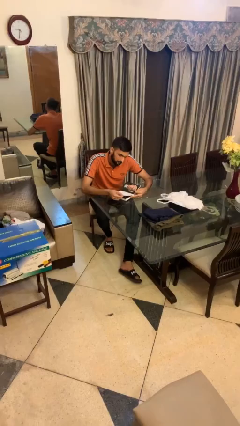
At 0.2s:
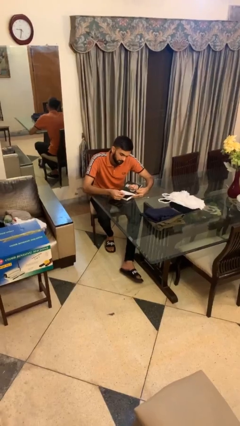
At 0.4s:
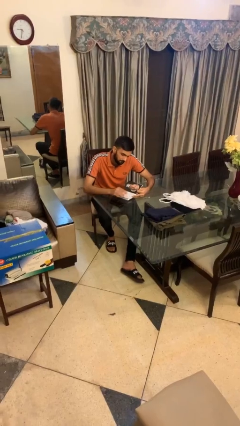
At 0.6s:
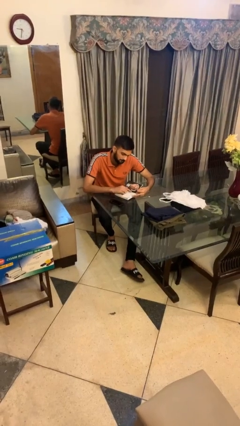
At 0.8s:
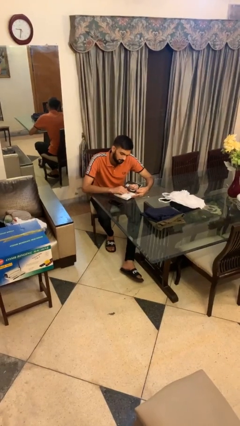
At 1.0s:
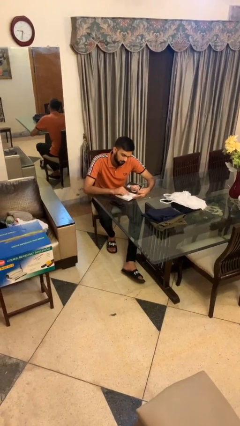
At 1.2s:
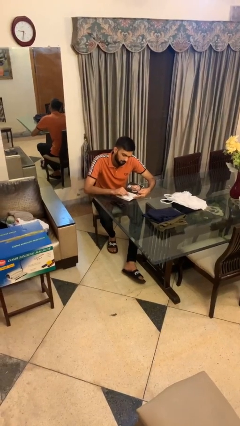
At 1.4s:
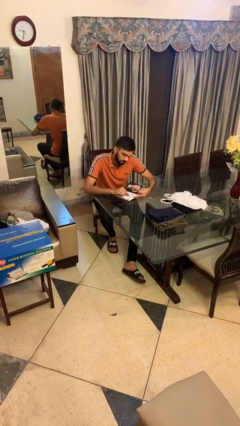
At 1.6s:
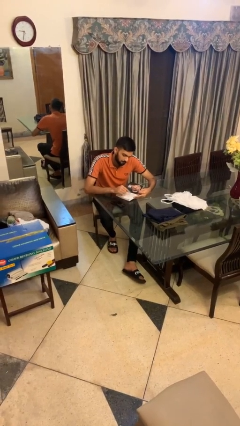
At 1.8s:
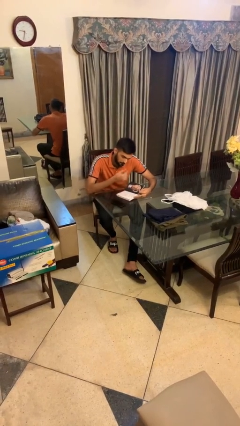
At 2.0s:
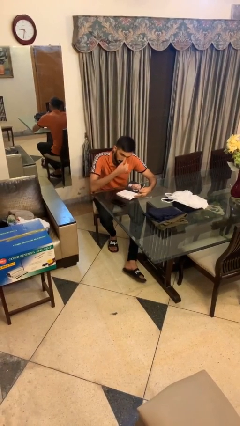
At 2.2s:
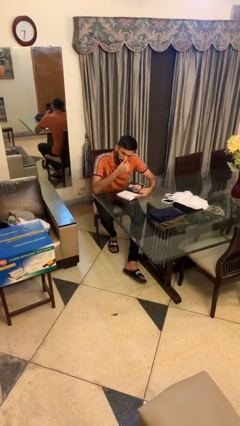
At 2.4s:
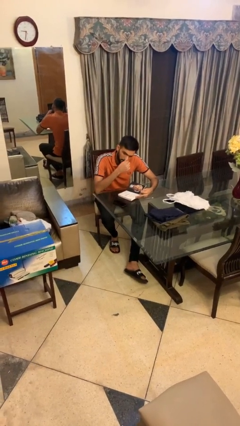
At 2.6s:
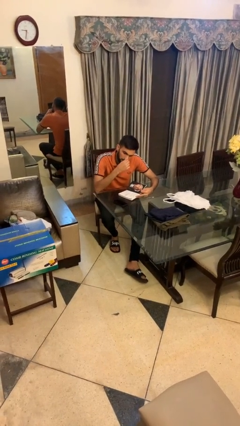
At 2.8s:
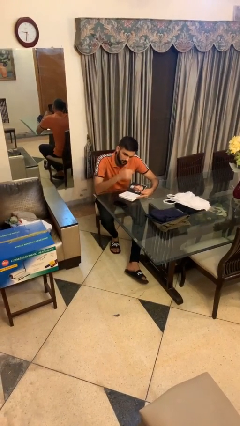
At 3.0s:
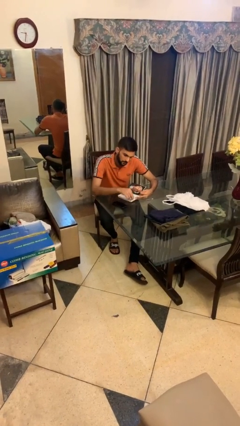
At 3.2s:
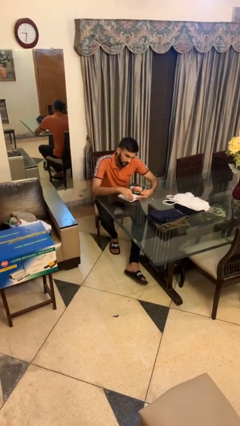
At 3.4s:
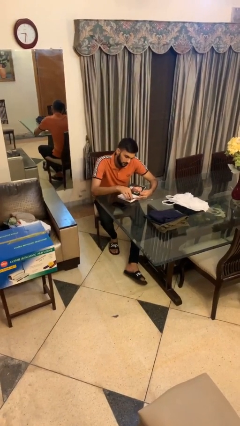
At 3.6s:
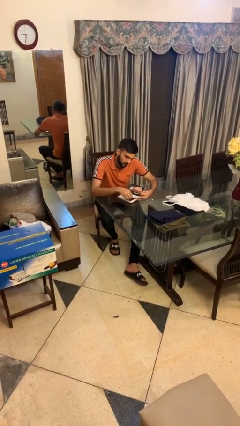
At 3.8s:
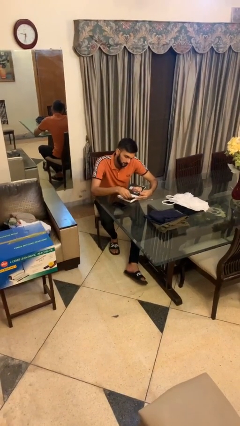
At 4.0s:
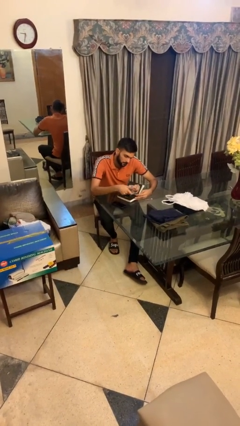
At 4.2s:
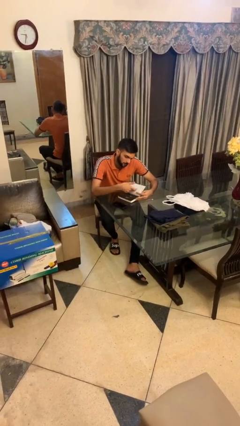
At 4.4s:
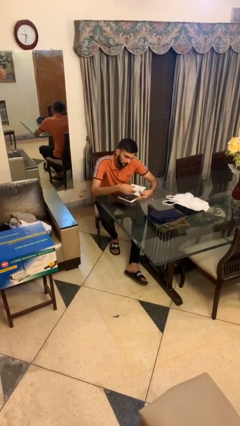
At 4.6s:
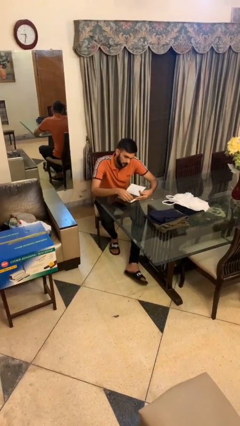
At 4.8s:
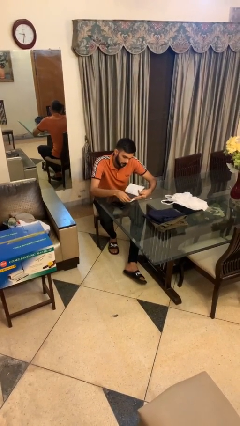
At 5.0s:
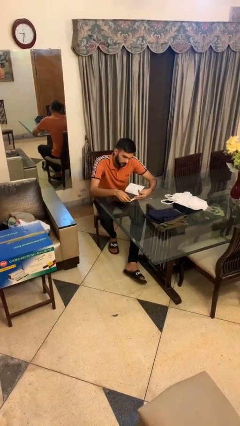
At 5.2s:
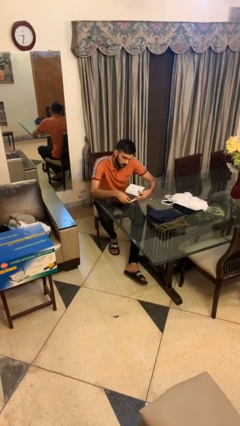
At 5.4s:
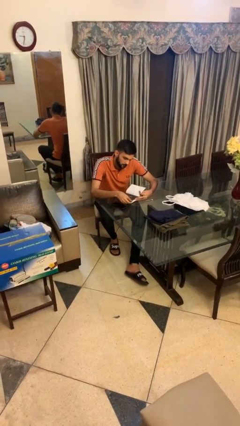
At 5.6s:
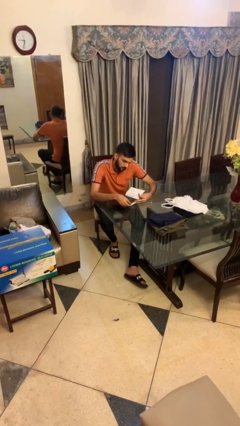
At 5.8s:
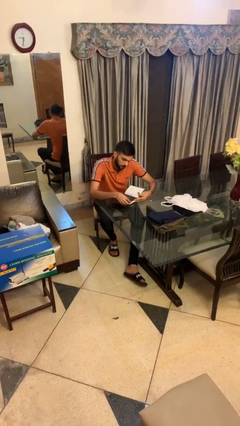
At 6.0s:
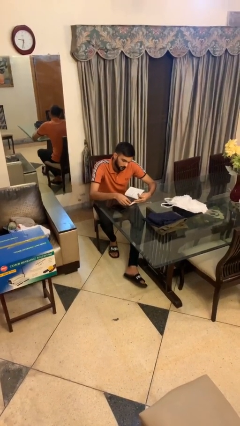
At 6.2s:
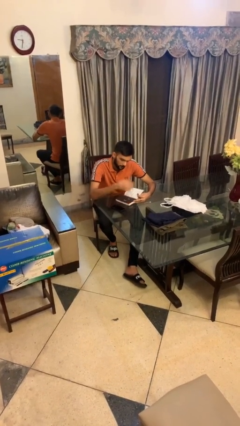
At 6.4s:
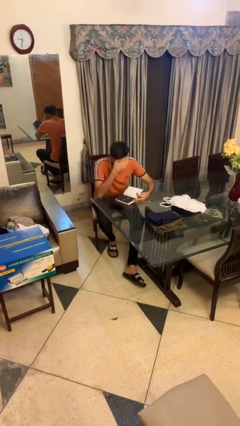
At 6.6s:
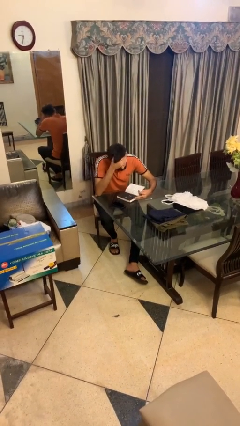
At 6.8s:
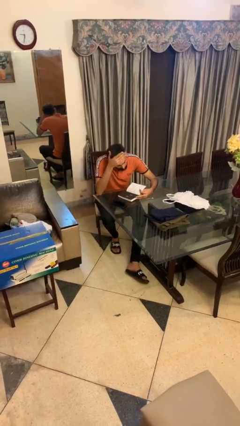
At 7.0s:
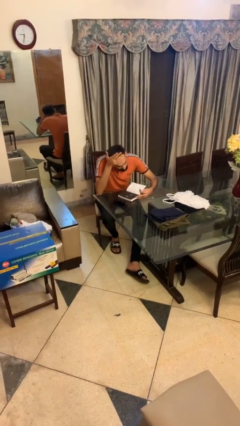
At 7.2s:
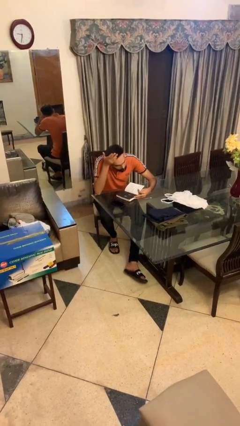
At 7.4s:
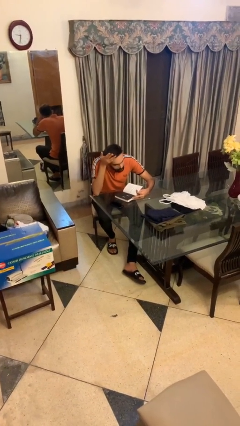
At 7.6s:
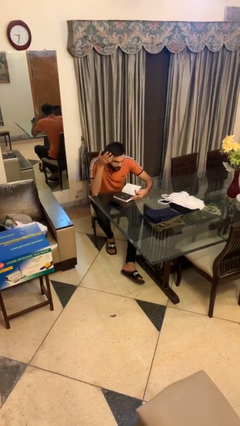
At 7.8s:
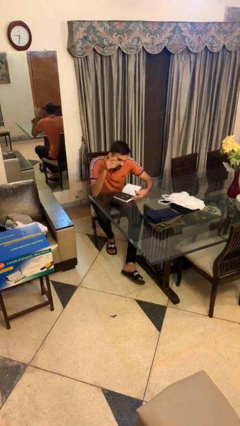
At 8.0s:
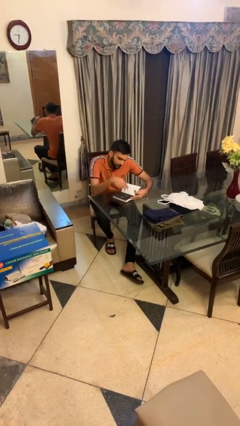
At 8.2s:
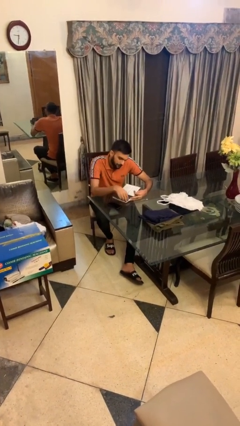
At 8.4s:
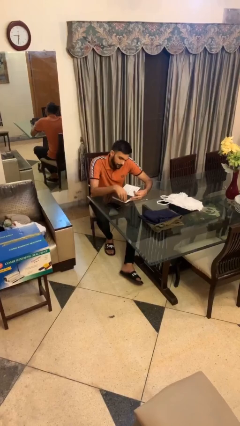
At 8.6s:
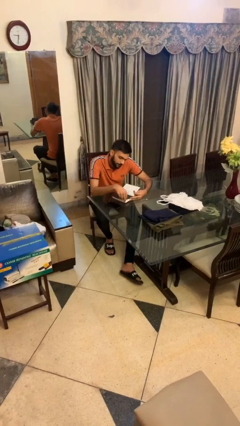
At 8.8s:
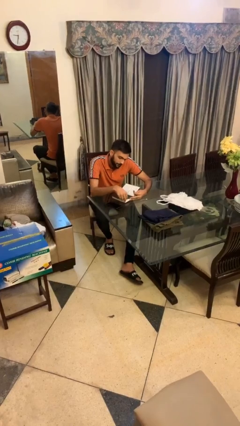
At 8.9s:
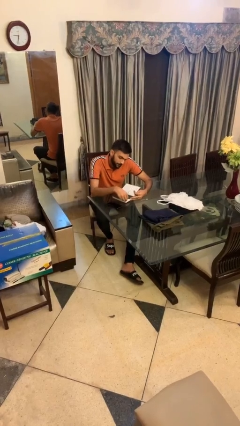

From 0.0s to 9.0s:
person reads document

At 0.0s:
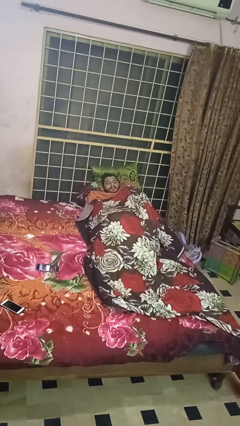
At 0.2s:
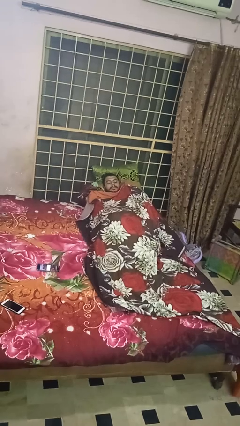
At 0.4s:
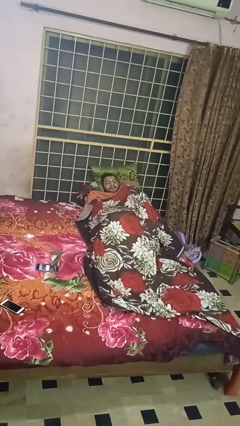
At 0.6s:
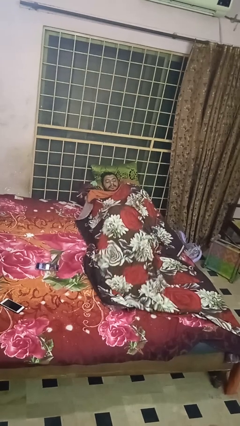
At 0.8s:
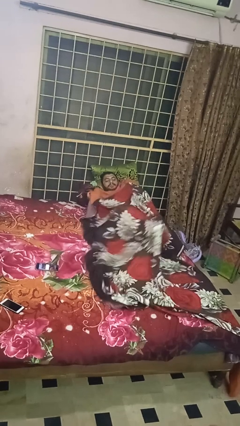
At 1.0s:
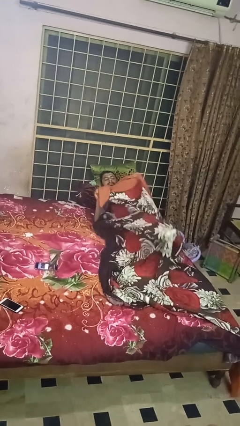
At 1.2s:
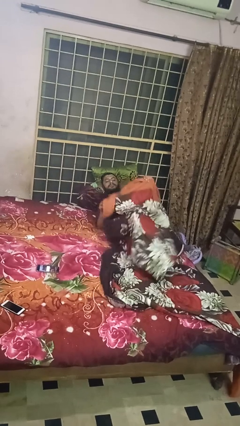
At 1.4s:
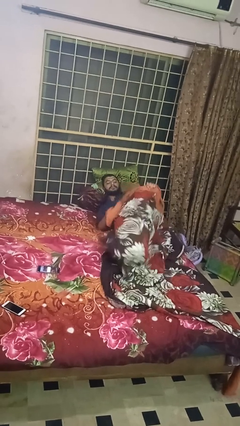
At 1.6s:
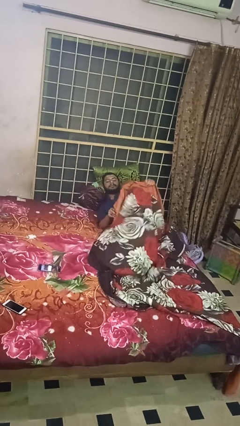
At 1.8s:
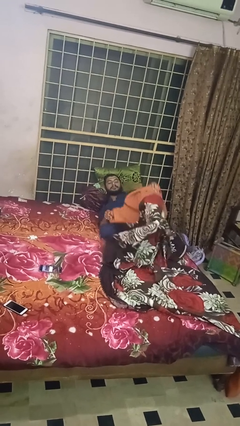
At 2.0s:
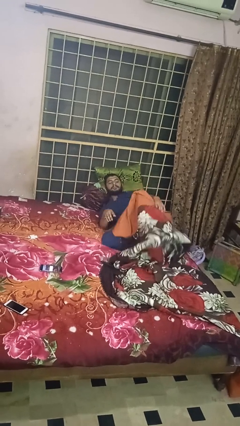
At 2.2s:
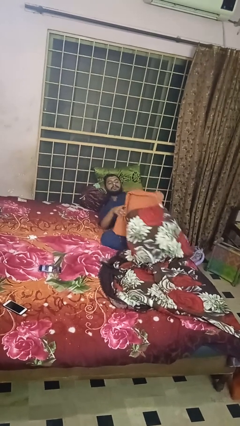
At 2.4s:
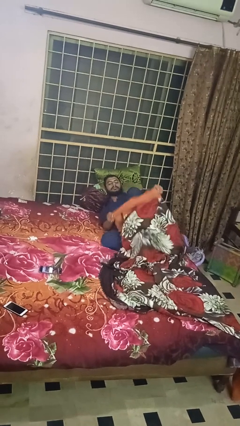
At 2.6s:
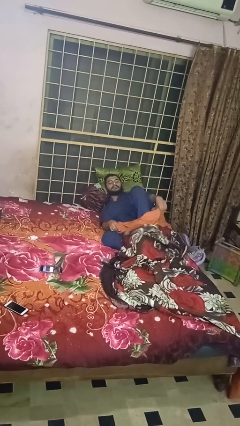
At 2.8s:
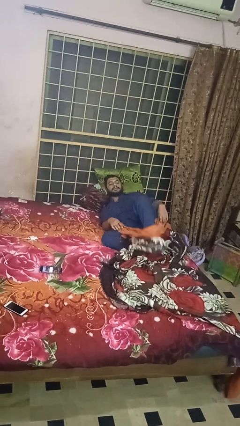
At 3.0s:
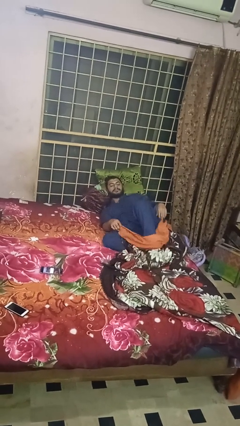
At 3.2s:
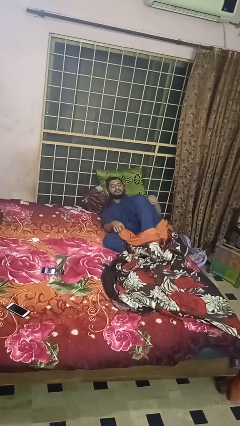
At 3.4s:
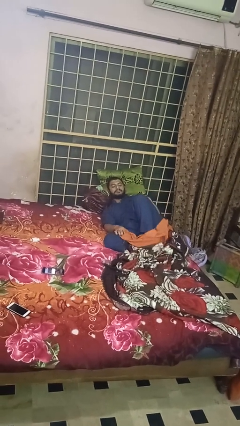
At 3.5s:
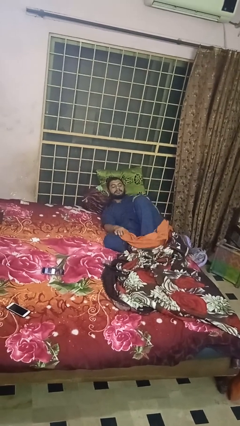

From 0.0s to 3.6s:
person uncovers with bedsheets

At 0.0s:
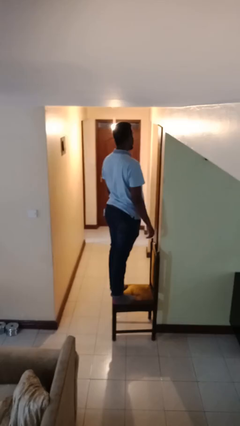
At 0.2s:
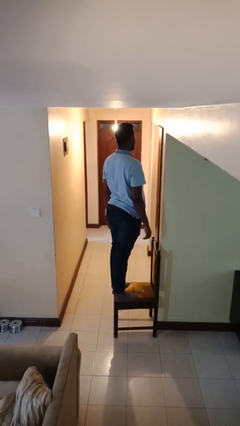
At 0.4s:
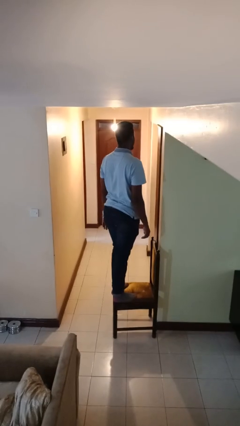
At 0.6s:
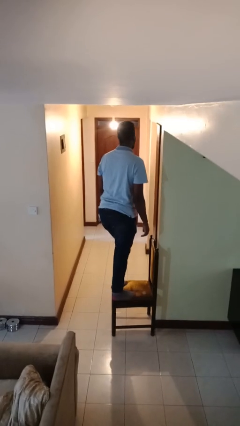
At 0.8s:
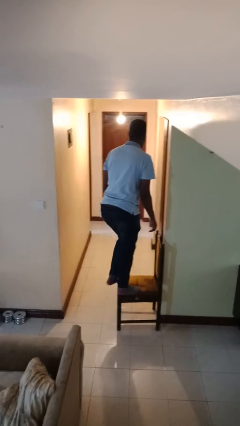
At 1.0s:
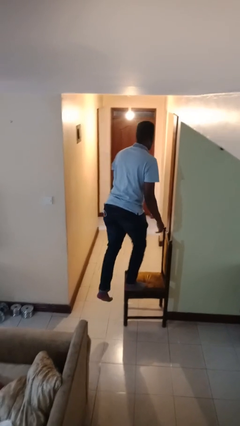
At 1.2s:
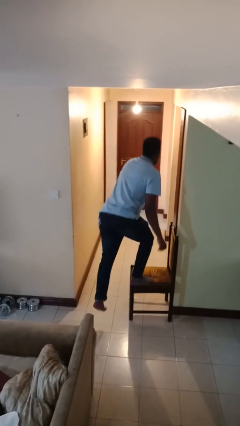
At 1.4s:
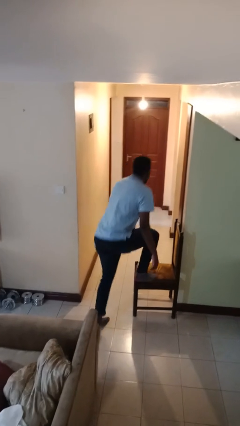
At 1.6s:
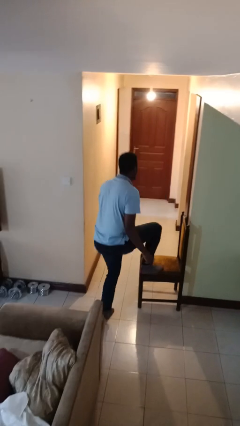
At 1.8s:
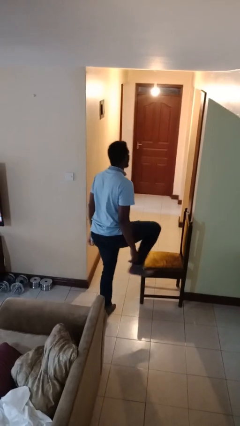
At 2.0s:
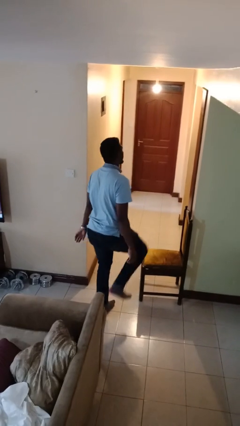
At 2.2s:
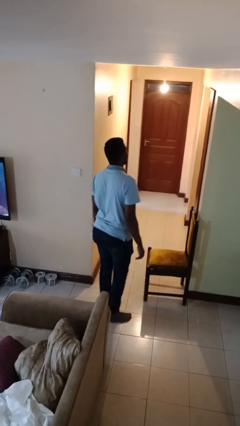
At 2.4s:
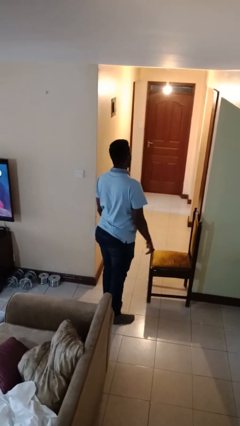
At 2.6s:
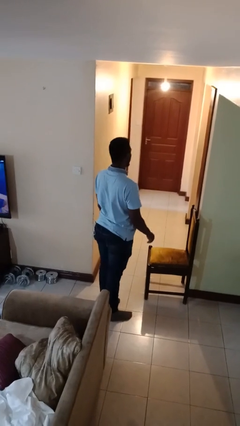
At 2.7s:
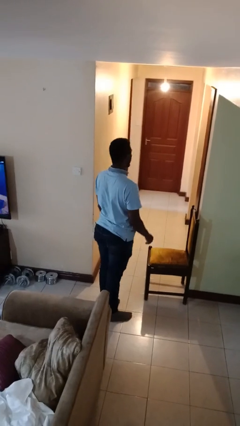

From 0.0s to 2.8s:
person climbs off chair

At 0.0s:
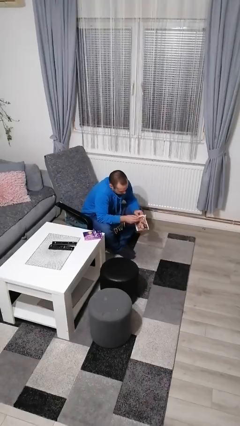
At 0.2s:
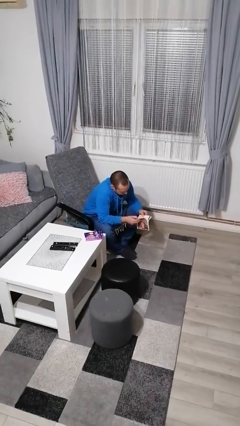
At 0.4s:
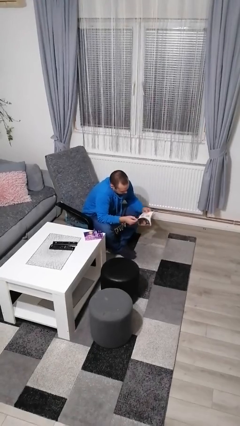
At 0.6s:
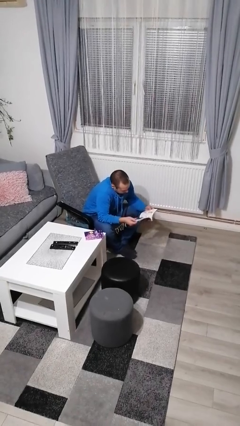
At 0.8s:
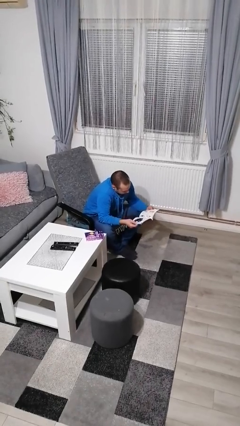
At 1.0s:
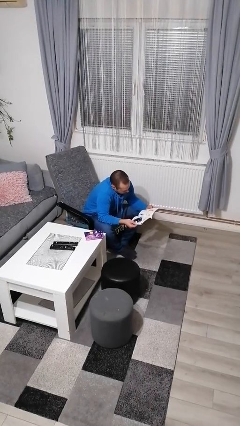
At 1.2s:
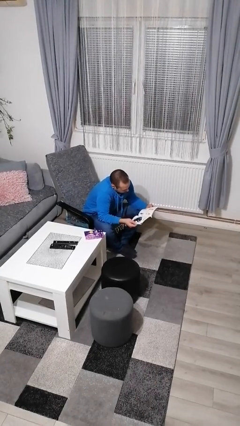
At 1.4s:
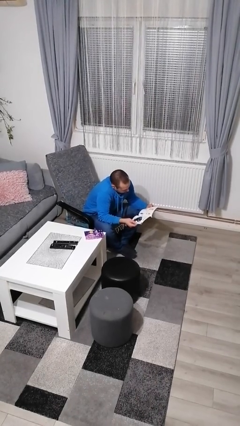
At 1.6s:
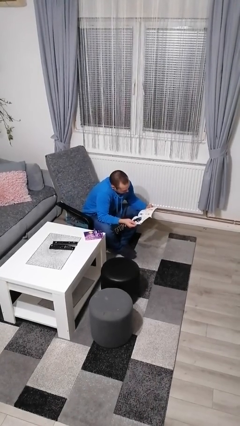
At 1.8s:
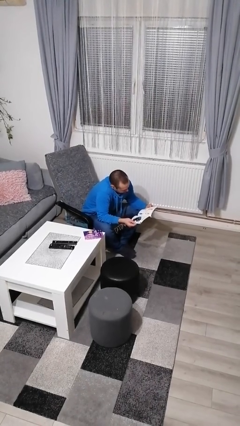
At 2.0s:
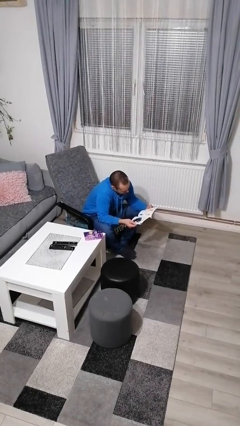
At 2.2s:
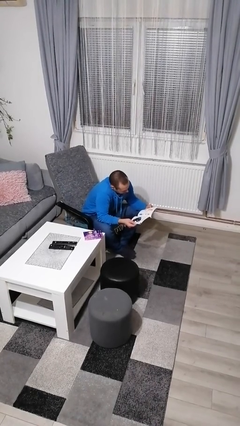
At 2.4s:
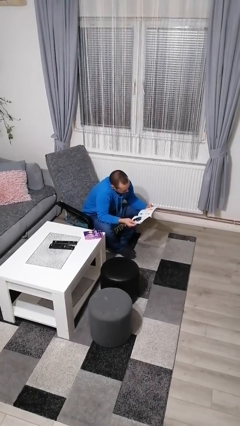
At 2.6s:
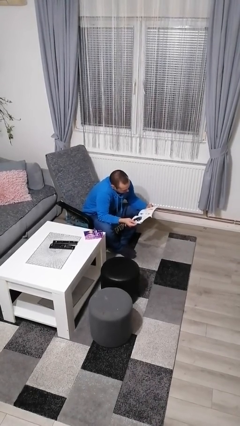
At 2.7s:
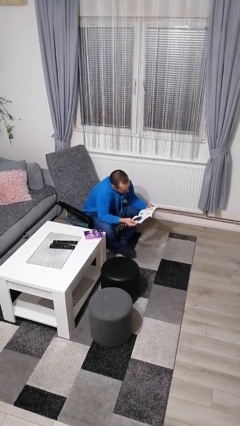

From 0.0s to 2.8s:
person reads magazine
